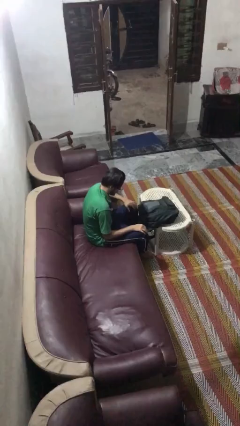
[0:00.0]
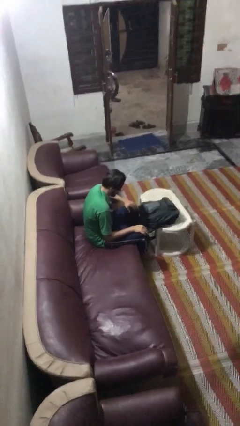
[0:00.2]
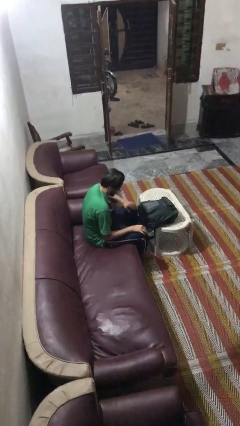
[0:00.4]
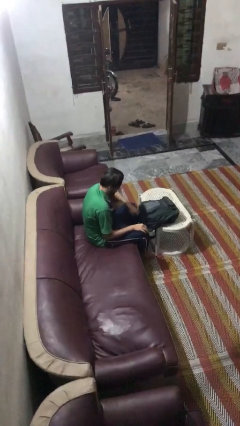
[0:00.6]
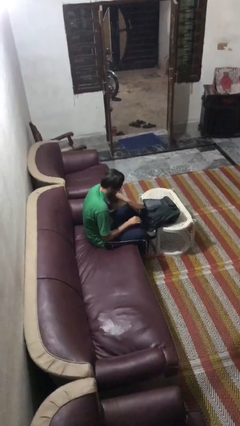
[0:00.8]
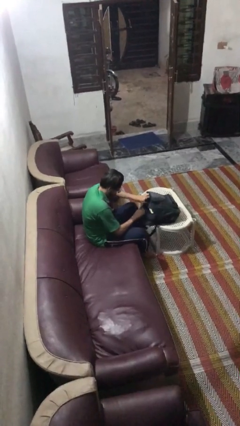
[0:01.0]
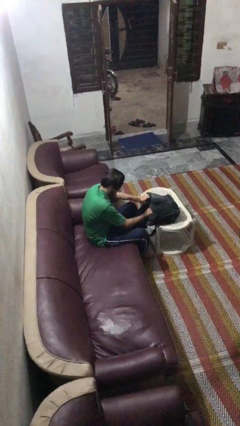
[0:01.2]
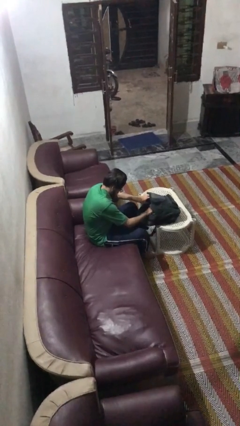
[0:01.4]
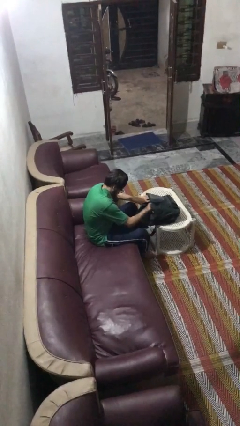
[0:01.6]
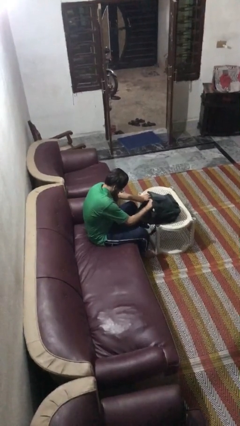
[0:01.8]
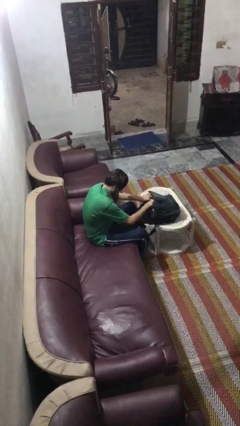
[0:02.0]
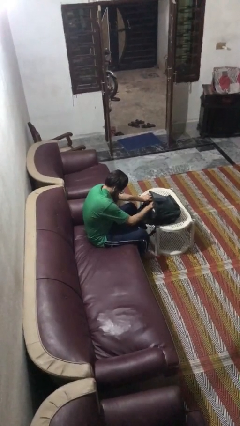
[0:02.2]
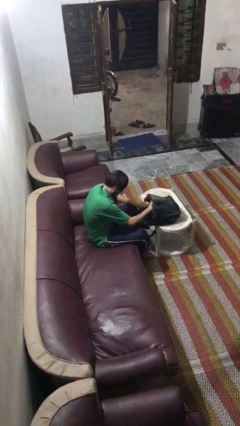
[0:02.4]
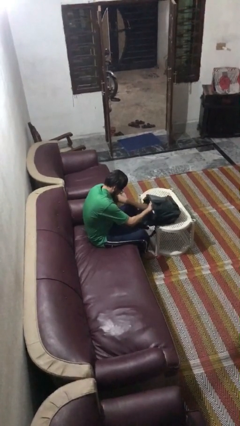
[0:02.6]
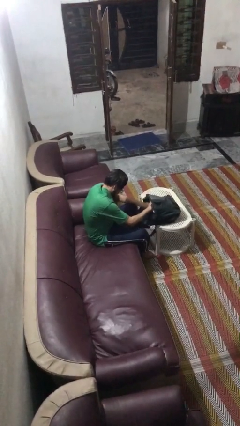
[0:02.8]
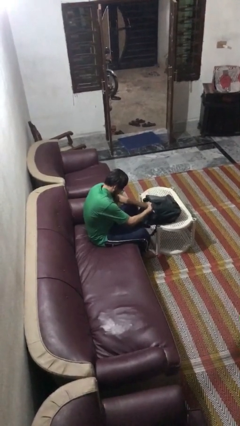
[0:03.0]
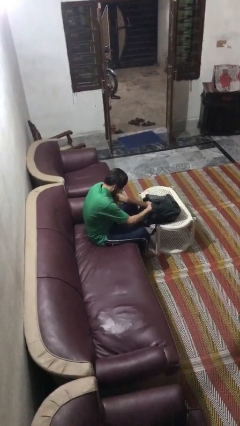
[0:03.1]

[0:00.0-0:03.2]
person searches in backpack

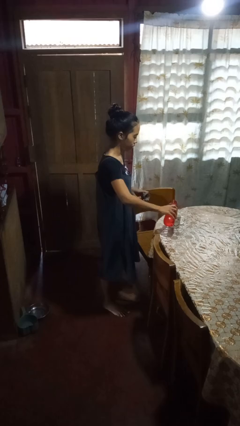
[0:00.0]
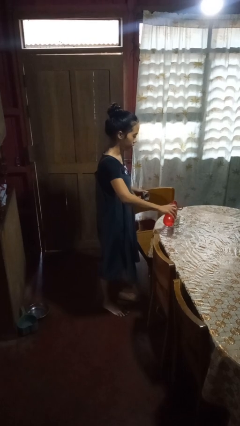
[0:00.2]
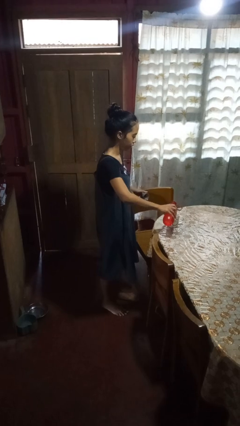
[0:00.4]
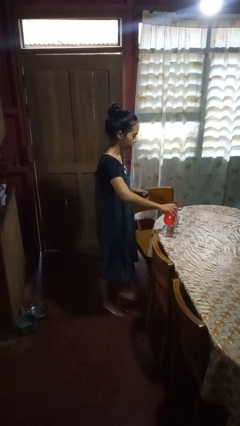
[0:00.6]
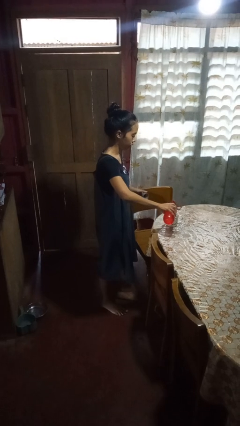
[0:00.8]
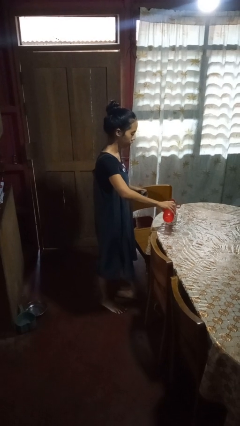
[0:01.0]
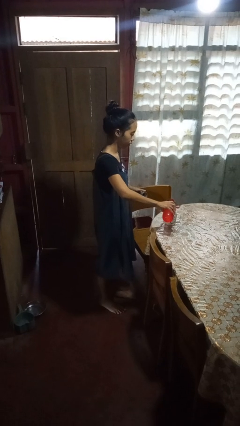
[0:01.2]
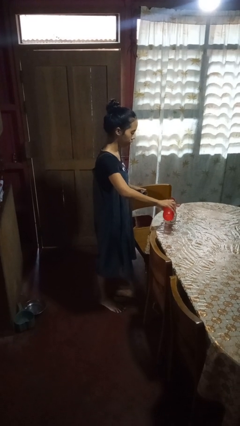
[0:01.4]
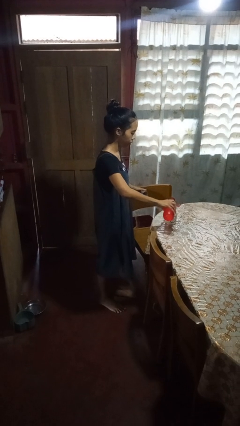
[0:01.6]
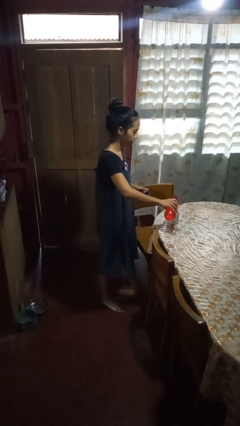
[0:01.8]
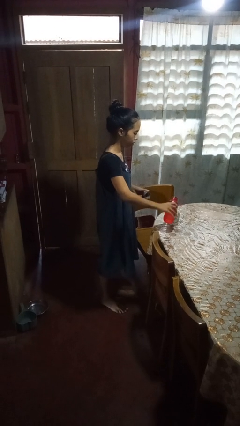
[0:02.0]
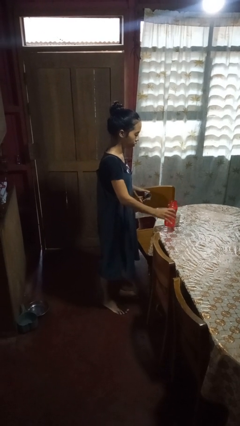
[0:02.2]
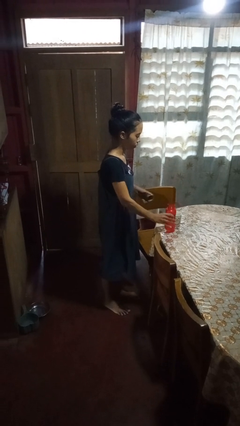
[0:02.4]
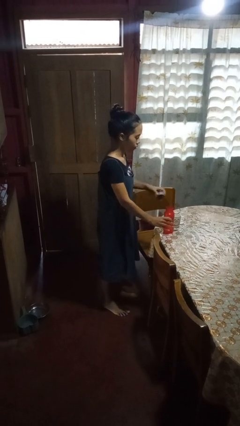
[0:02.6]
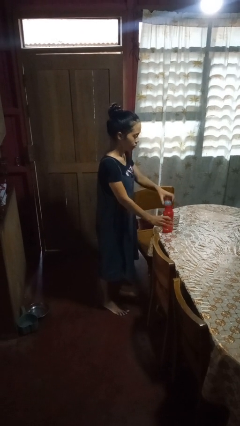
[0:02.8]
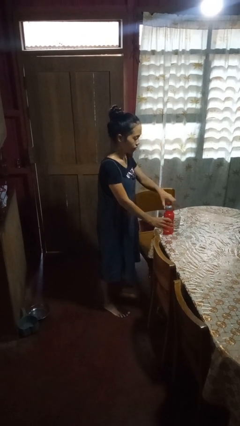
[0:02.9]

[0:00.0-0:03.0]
person pours liquid into cup

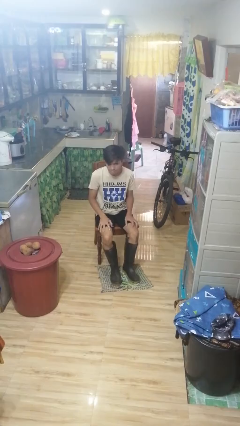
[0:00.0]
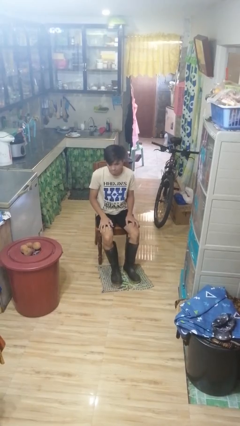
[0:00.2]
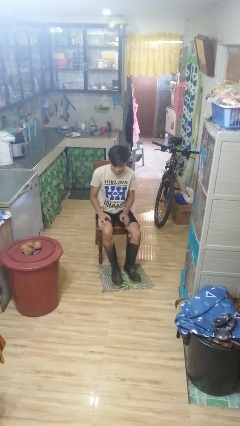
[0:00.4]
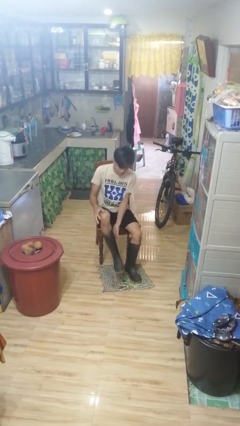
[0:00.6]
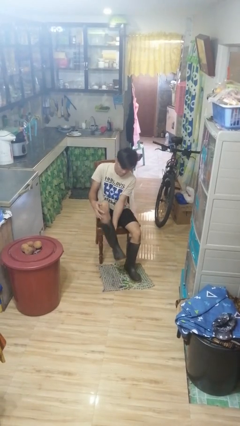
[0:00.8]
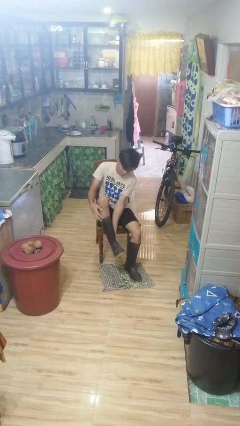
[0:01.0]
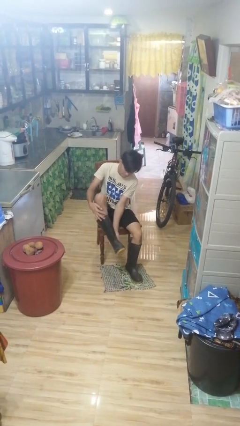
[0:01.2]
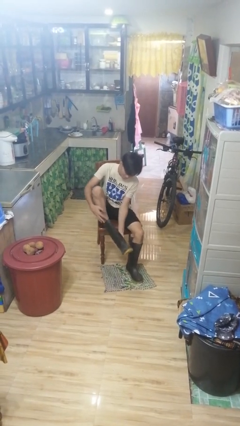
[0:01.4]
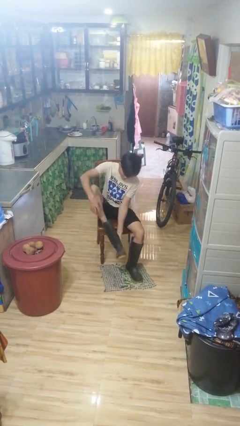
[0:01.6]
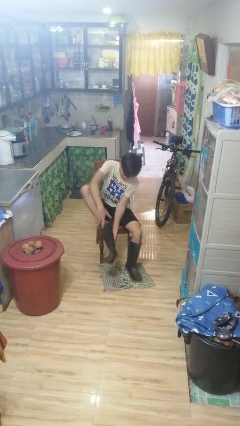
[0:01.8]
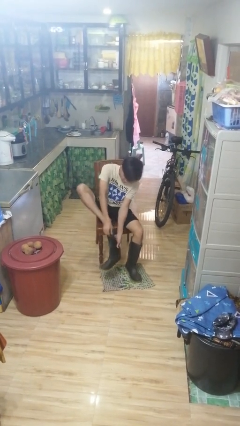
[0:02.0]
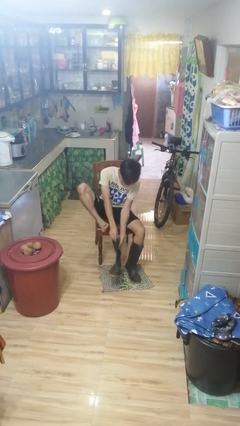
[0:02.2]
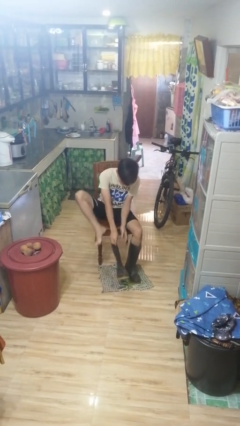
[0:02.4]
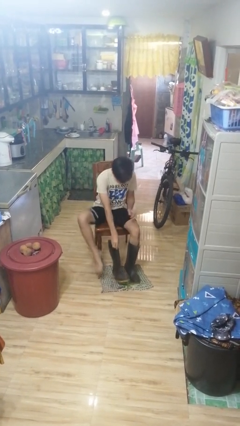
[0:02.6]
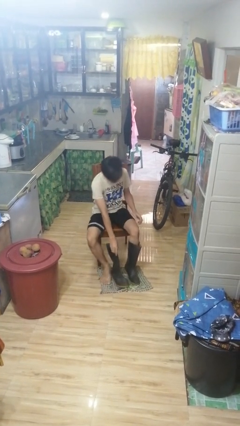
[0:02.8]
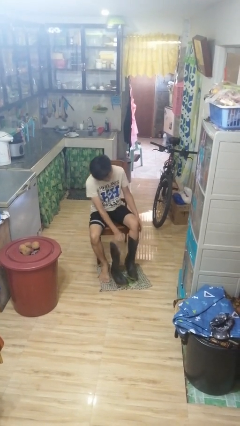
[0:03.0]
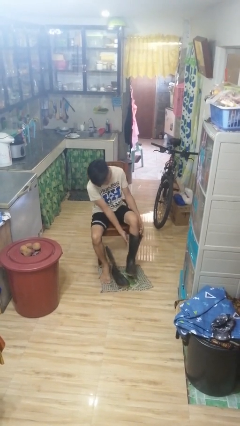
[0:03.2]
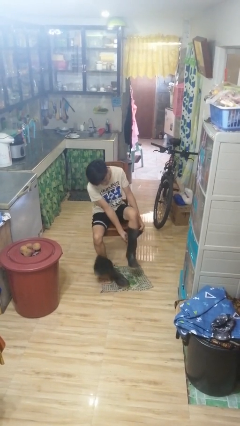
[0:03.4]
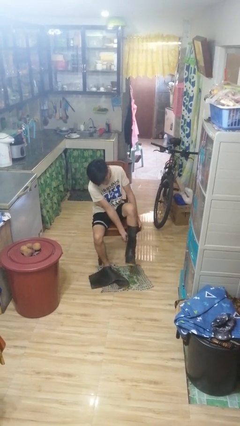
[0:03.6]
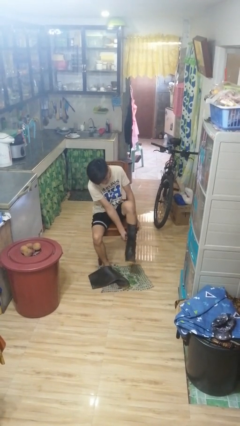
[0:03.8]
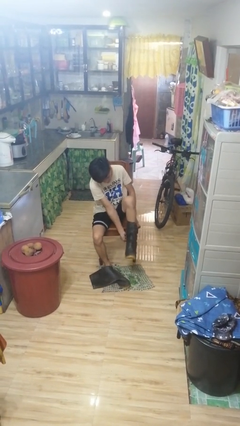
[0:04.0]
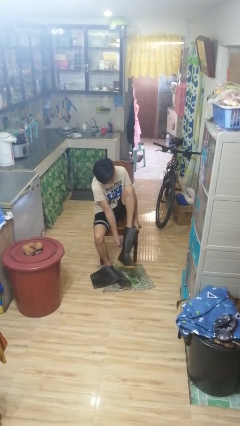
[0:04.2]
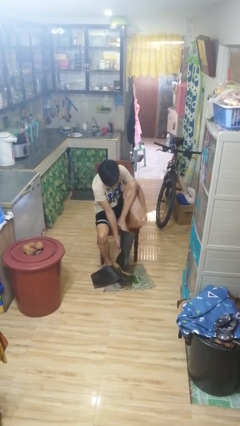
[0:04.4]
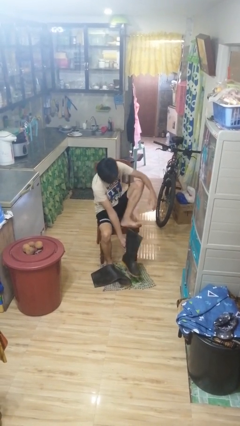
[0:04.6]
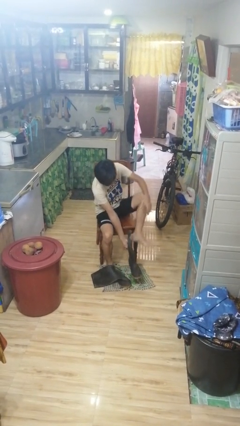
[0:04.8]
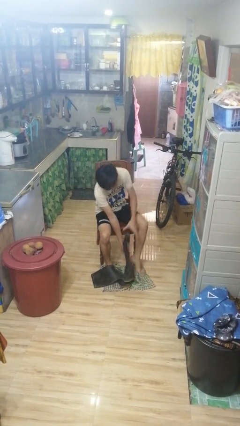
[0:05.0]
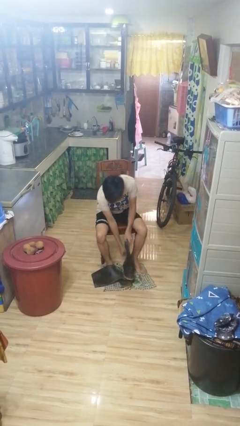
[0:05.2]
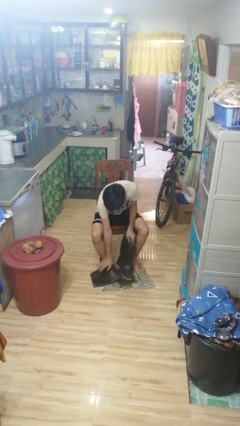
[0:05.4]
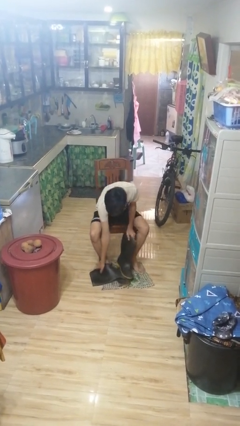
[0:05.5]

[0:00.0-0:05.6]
person takes off boots

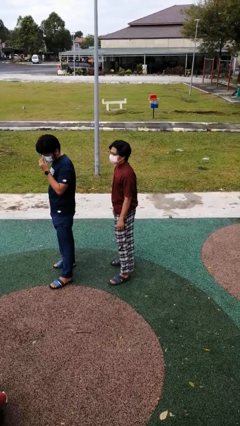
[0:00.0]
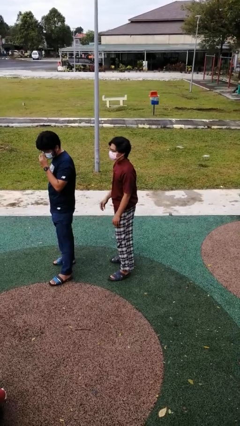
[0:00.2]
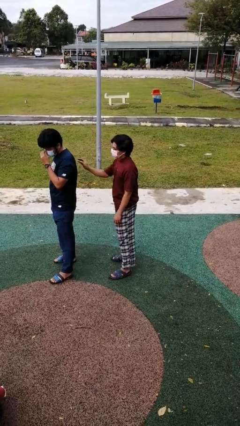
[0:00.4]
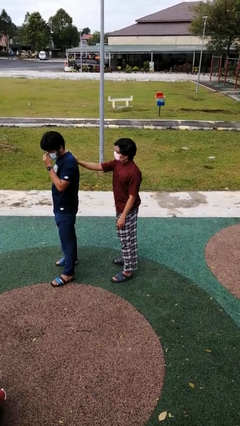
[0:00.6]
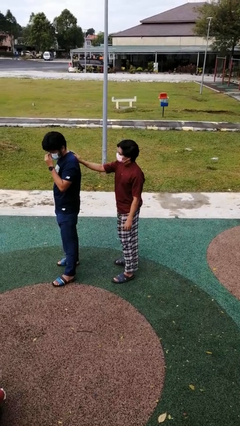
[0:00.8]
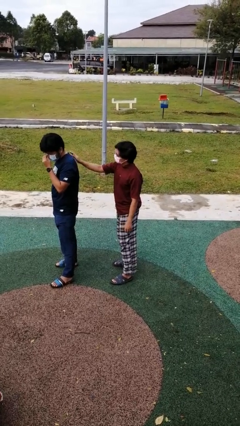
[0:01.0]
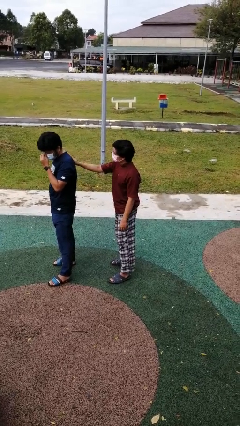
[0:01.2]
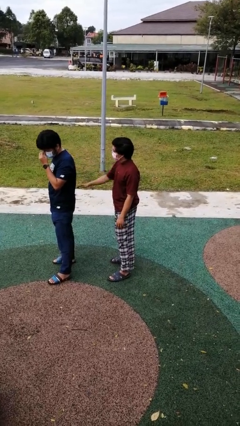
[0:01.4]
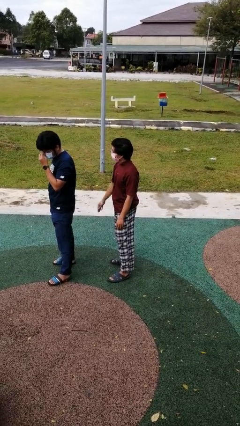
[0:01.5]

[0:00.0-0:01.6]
person touches back of person

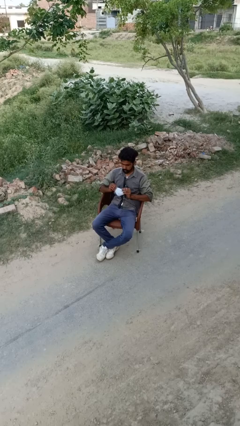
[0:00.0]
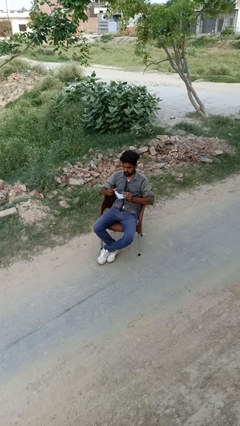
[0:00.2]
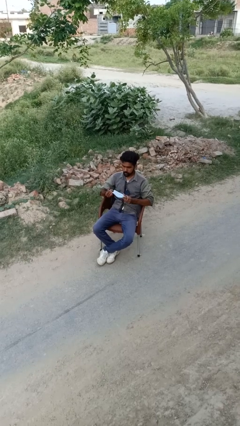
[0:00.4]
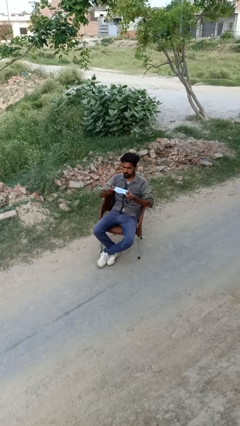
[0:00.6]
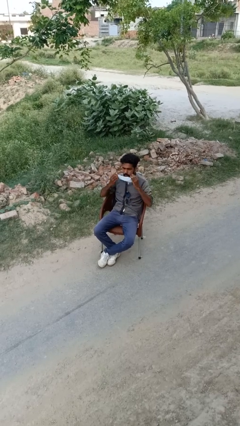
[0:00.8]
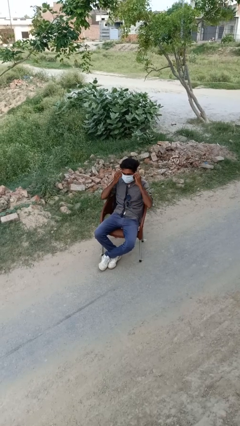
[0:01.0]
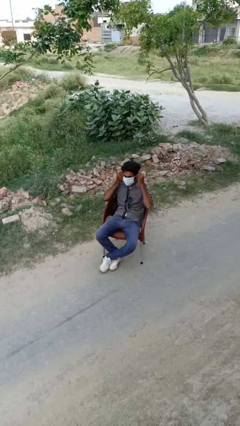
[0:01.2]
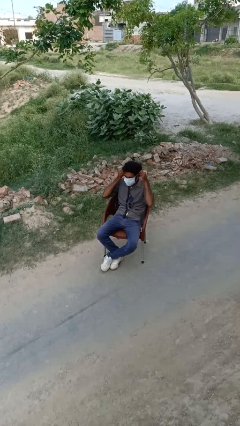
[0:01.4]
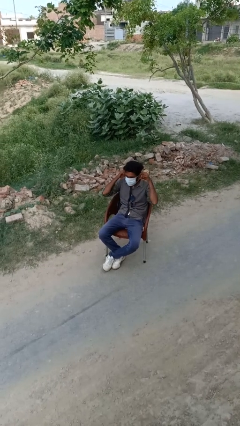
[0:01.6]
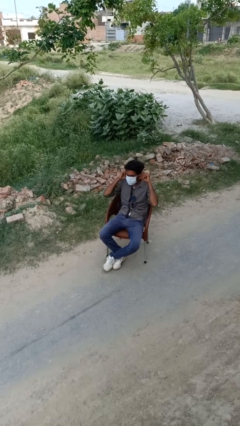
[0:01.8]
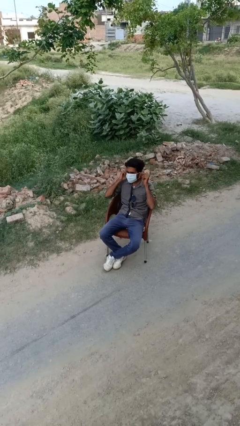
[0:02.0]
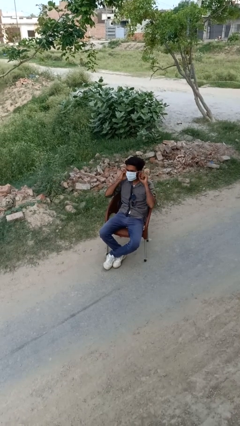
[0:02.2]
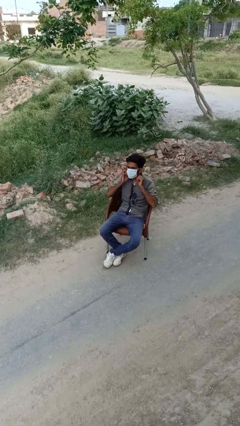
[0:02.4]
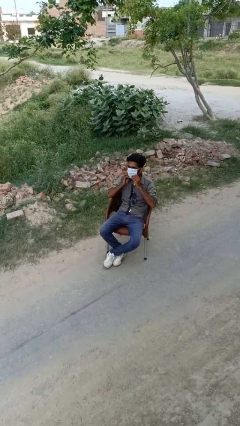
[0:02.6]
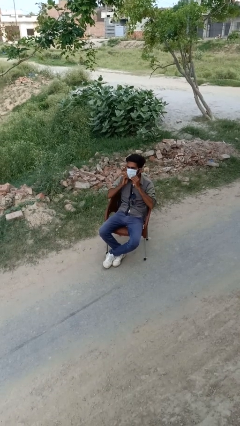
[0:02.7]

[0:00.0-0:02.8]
person puts on facemask

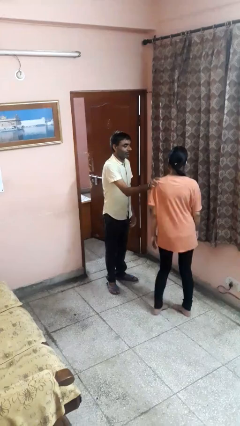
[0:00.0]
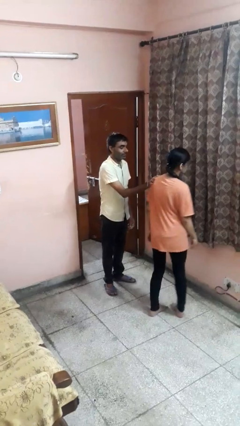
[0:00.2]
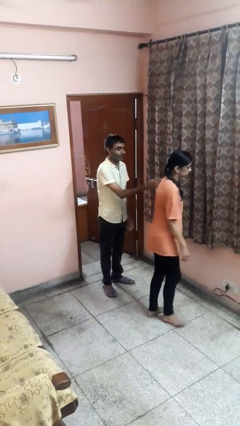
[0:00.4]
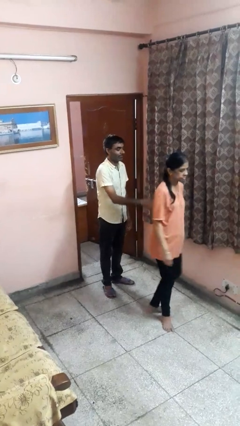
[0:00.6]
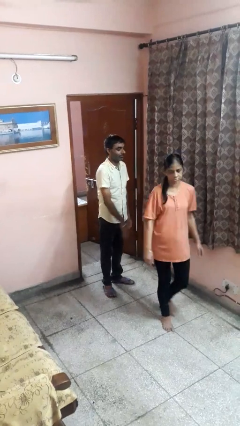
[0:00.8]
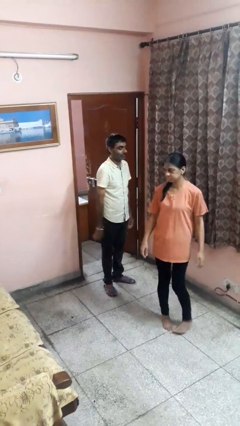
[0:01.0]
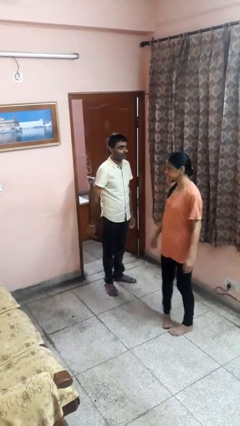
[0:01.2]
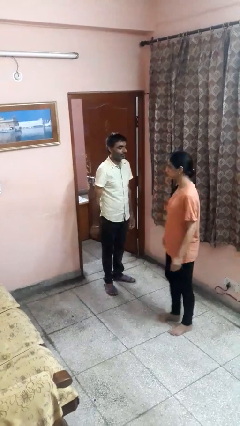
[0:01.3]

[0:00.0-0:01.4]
person spins person around
